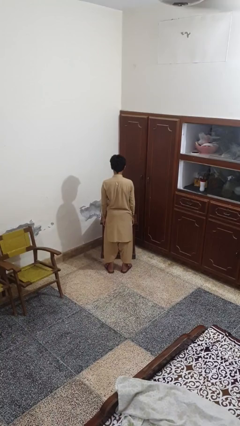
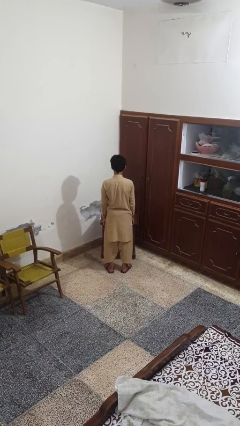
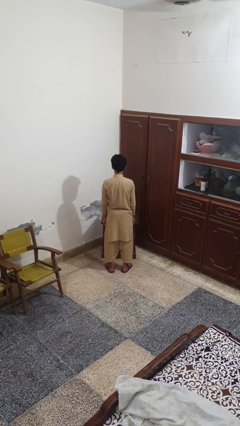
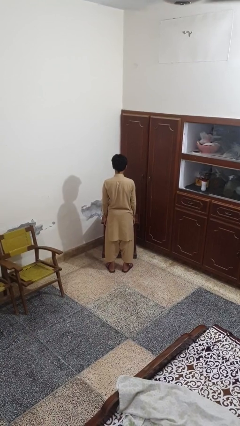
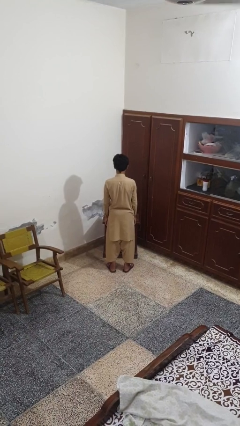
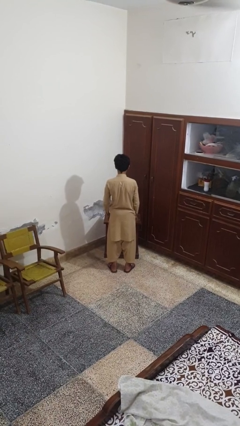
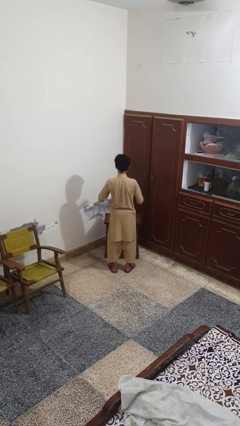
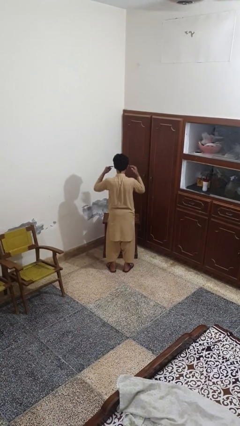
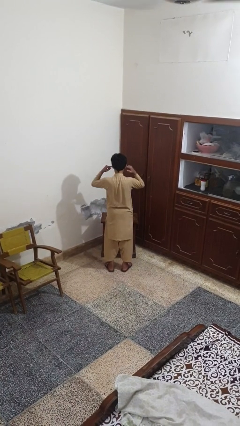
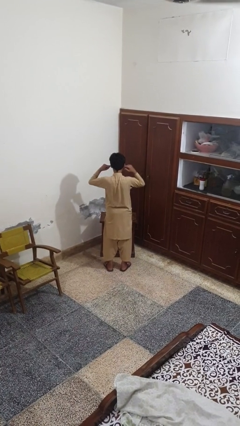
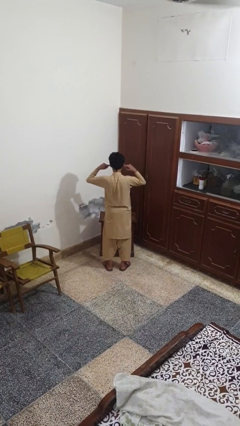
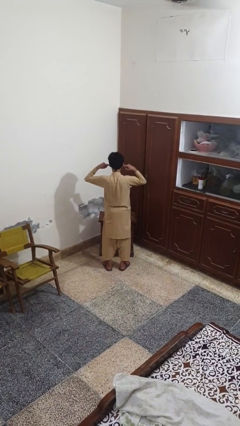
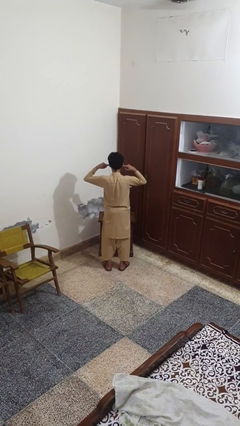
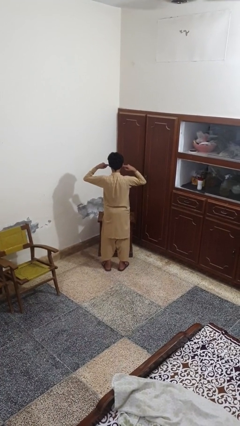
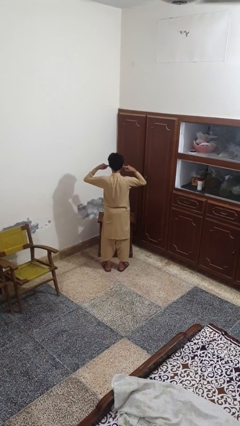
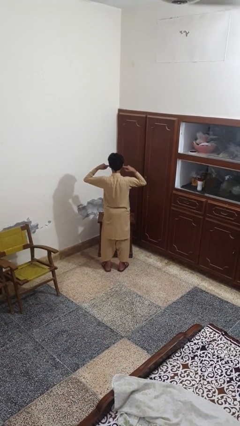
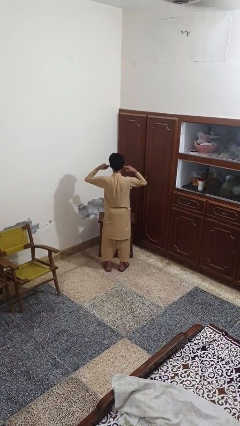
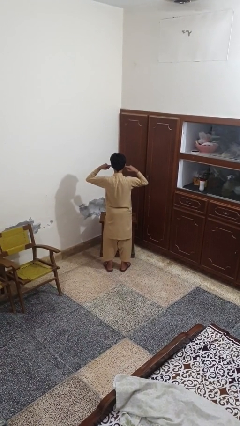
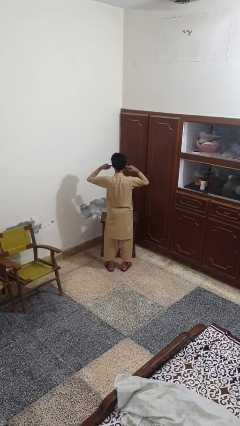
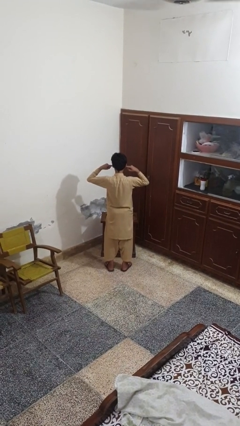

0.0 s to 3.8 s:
person puts fingers in ear

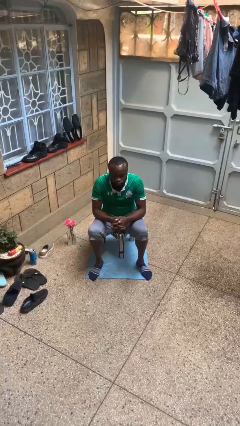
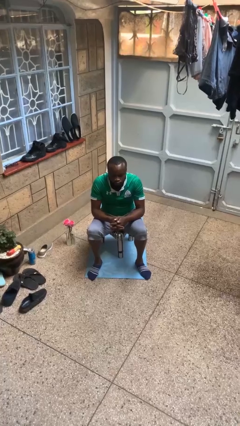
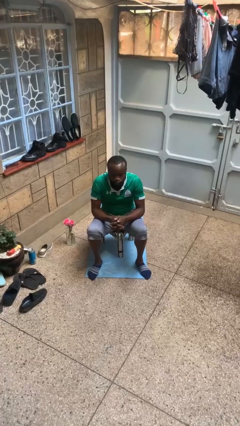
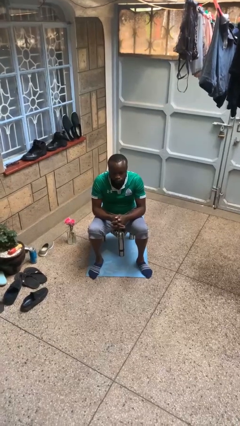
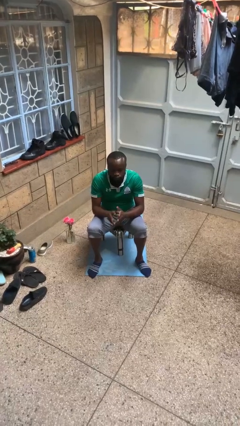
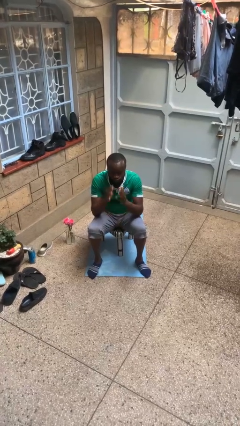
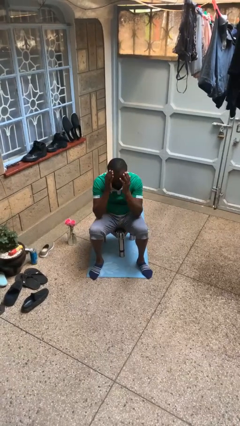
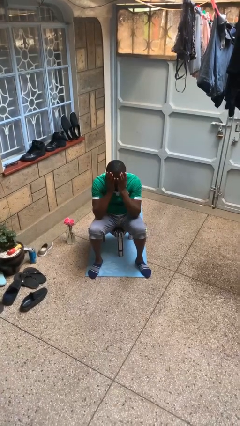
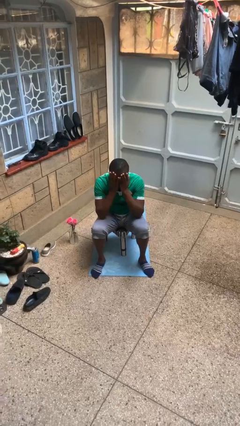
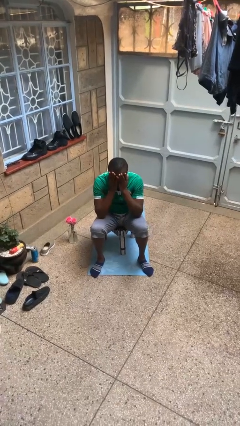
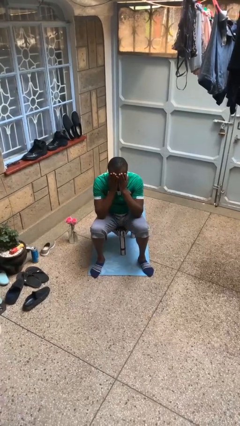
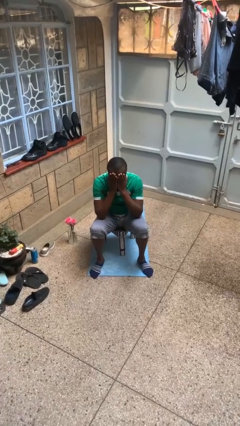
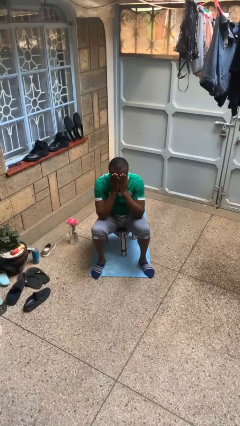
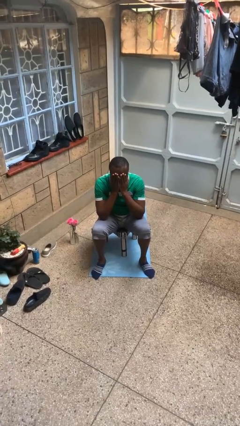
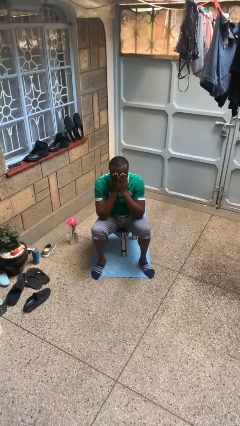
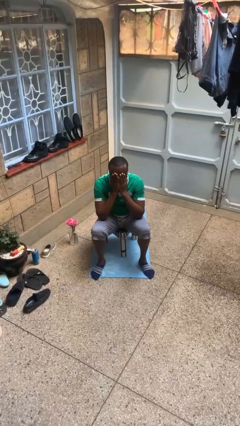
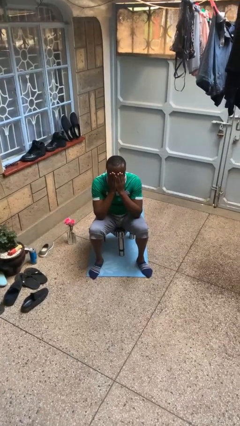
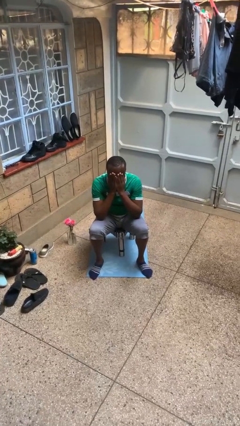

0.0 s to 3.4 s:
person covers face with hands

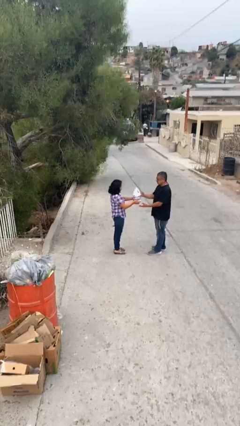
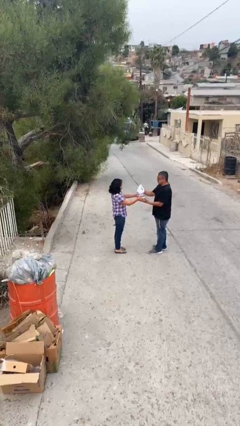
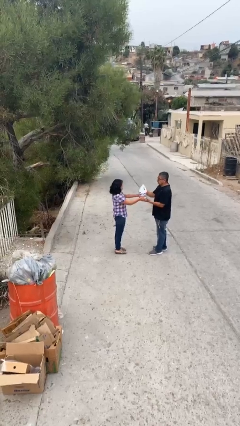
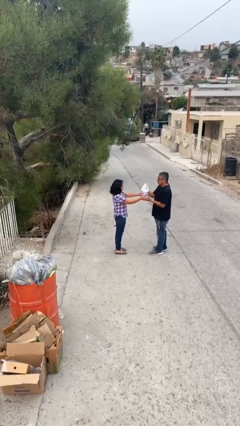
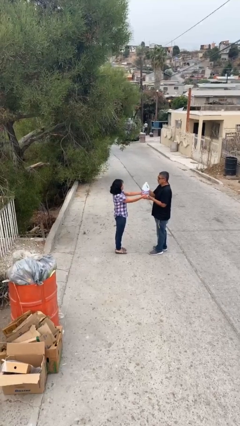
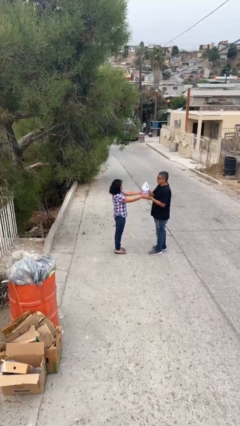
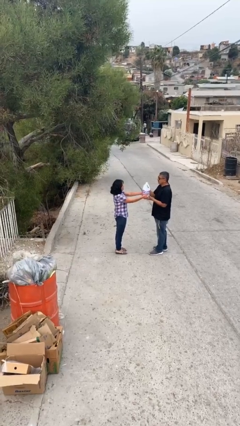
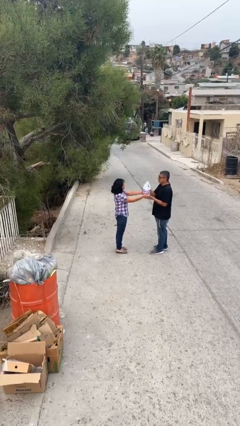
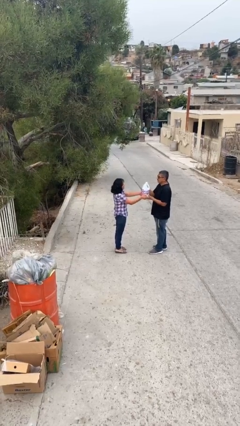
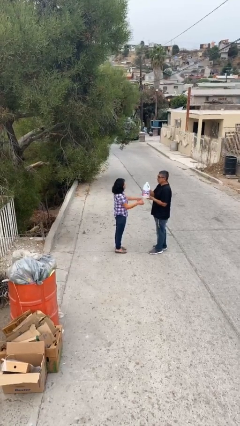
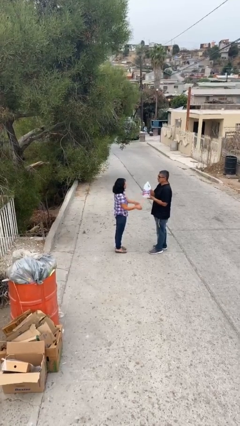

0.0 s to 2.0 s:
person transfers object to person

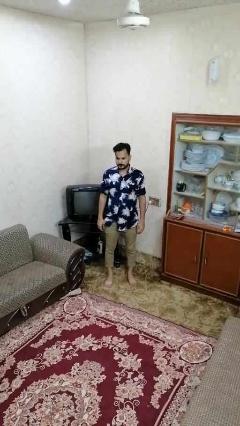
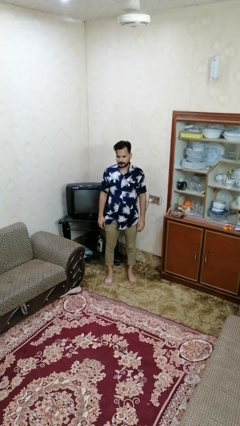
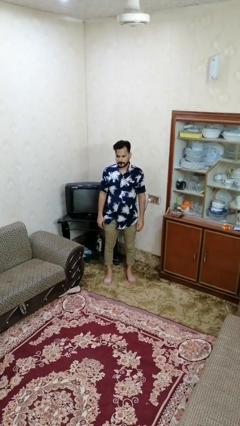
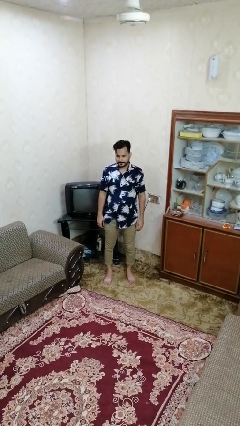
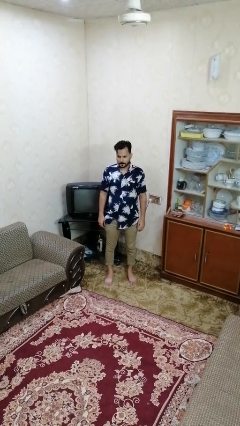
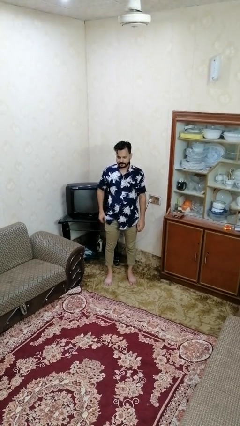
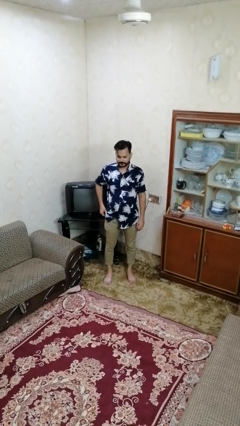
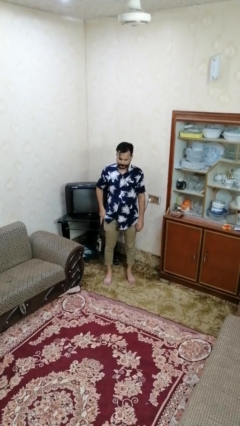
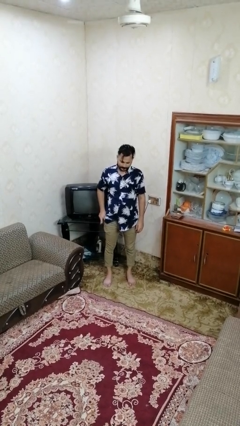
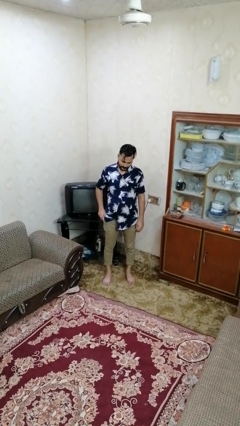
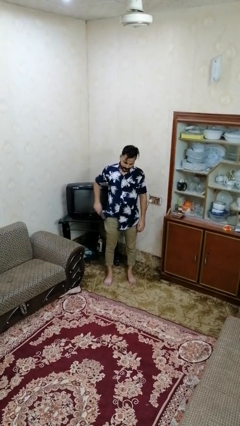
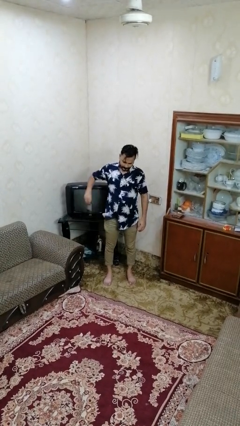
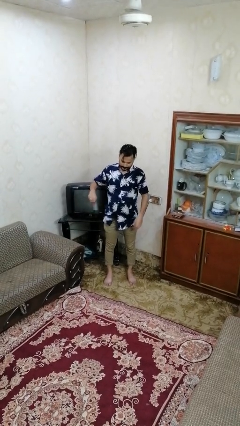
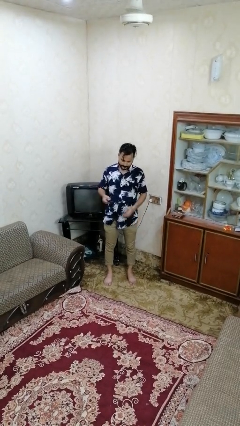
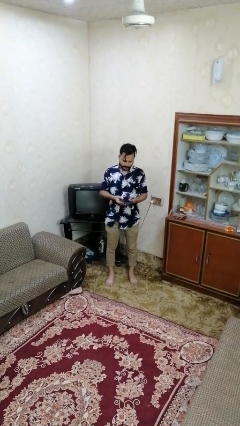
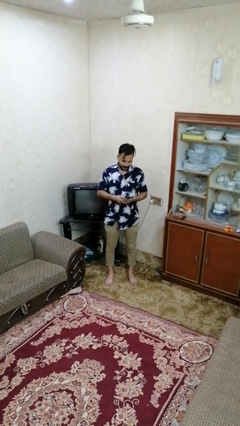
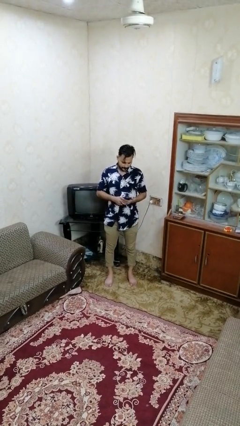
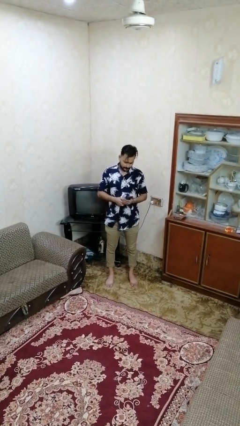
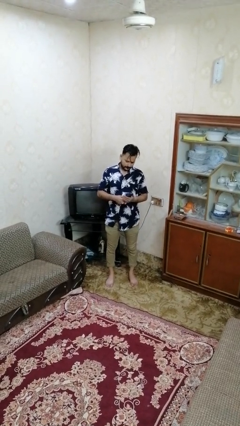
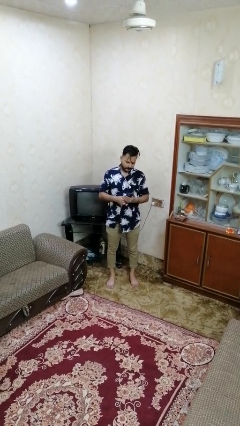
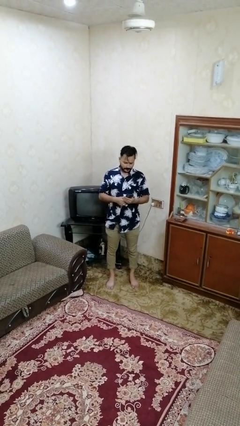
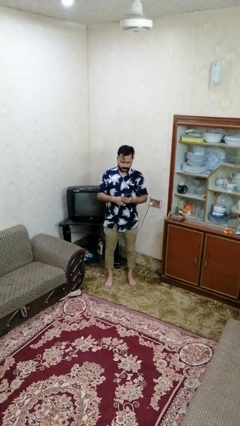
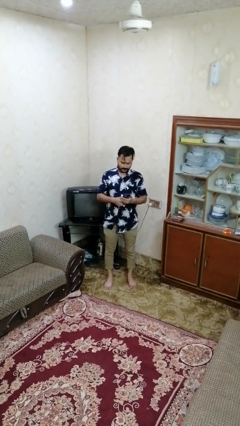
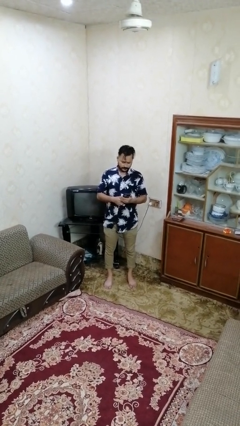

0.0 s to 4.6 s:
person takes phone from pocket

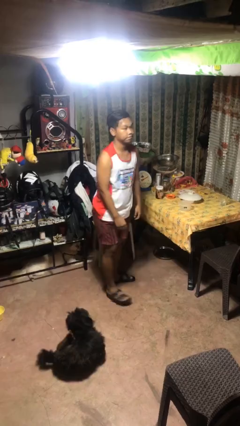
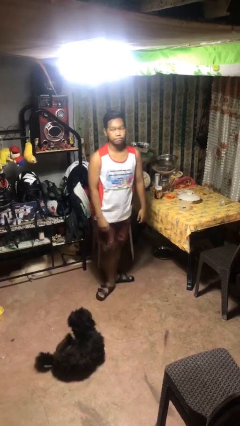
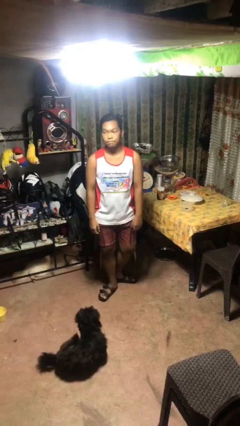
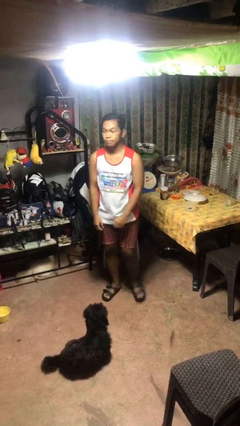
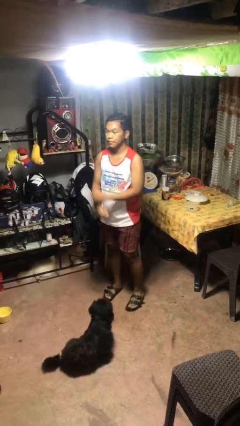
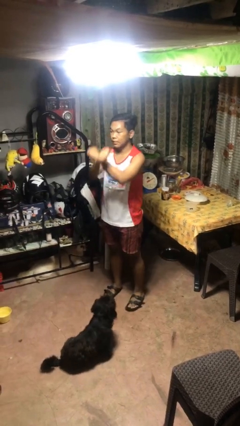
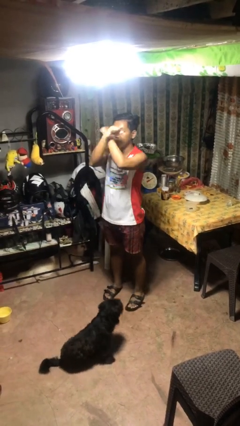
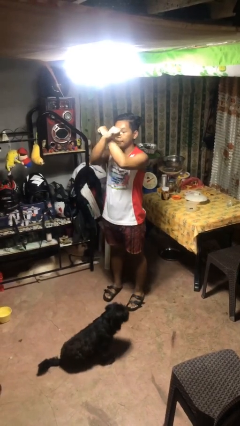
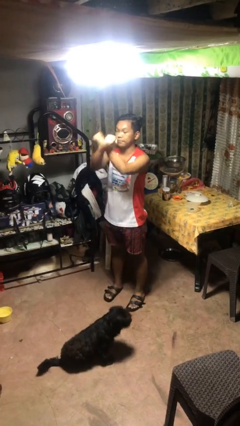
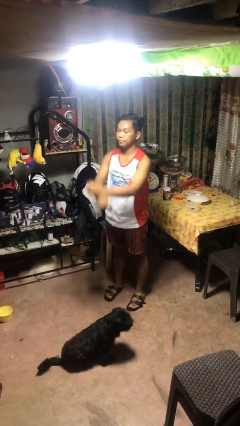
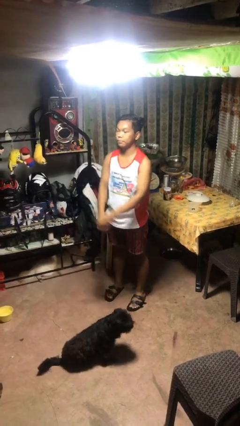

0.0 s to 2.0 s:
person gestures arms x

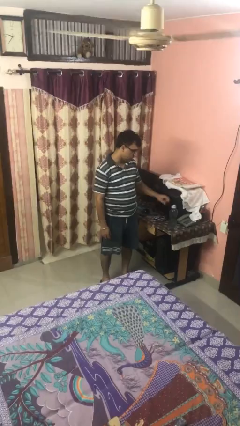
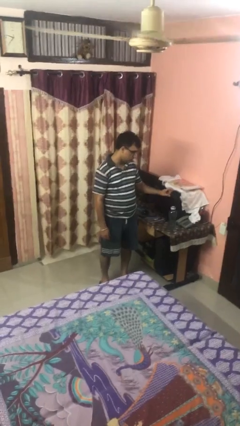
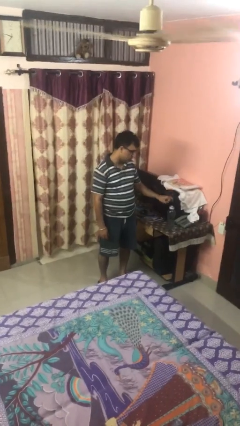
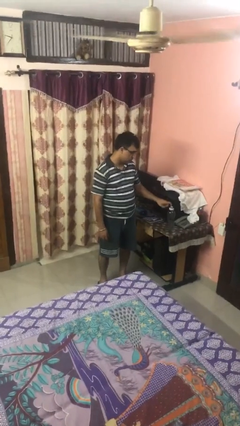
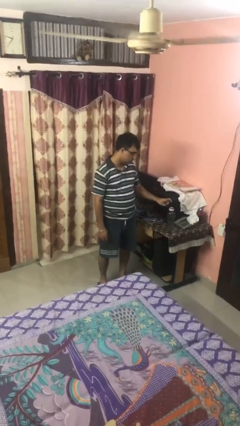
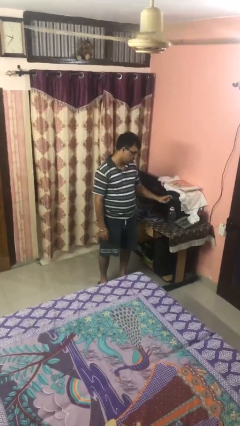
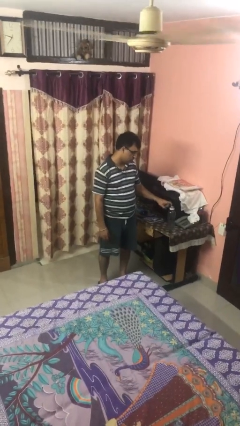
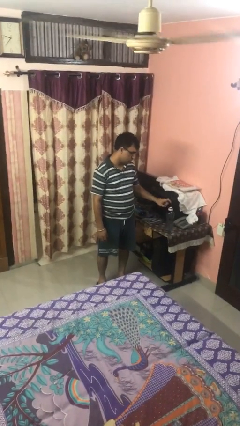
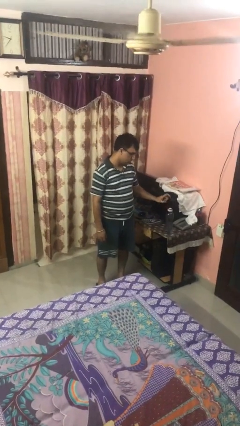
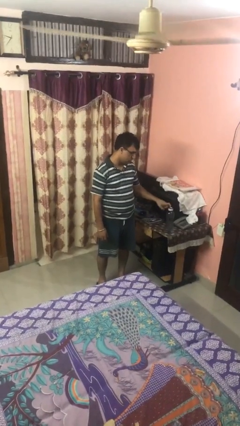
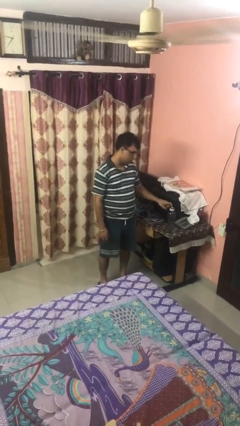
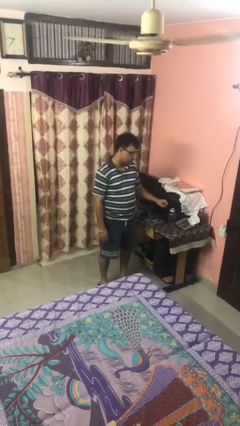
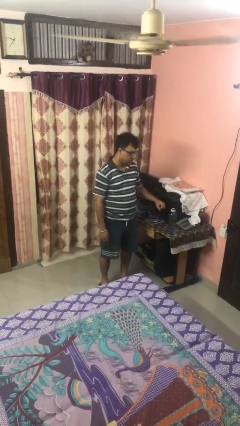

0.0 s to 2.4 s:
person taps object with finger
